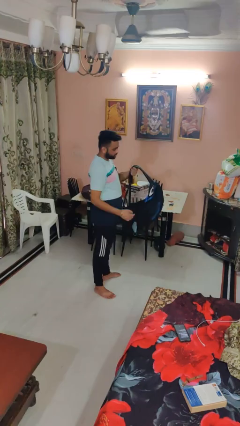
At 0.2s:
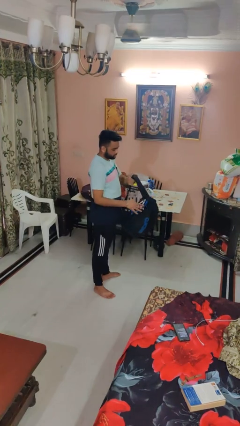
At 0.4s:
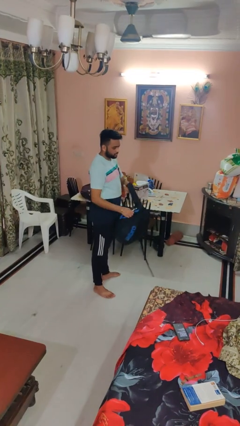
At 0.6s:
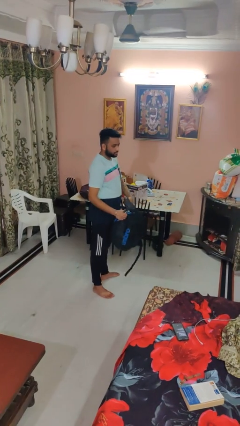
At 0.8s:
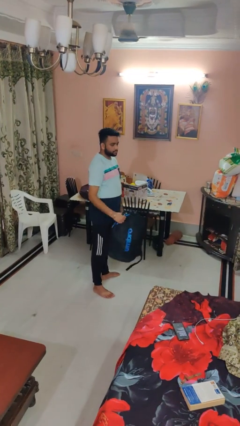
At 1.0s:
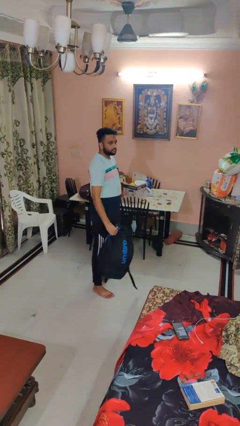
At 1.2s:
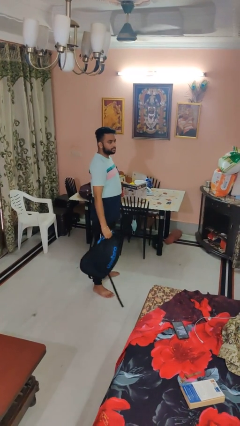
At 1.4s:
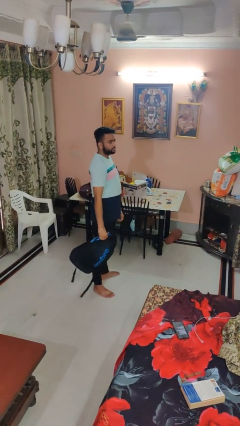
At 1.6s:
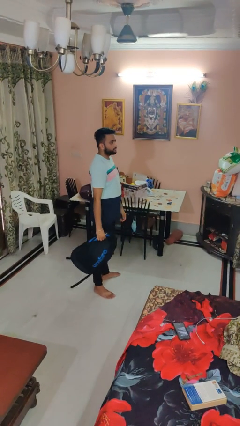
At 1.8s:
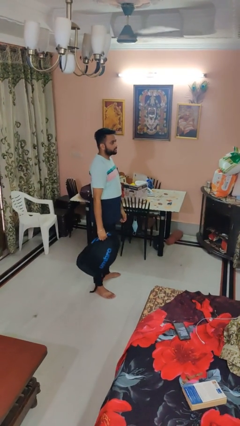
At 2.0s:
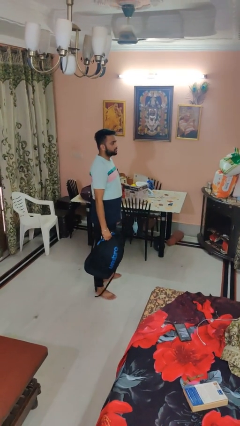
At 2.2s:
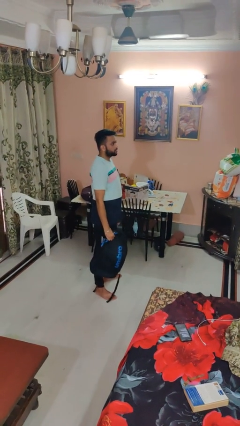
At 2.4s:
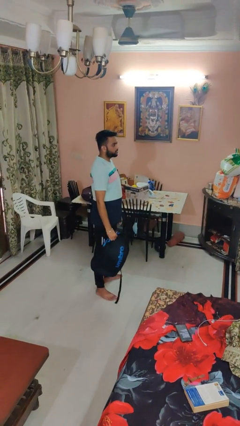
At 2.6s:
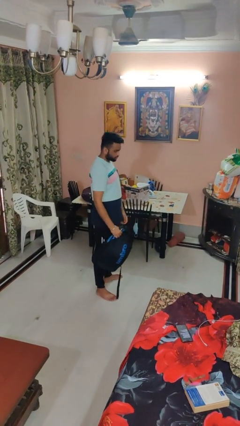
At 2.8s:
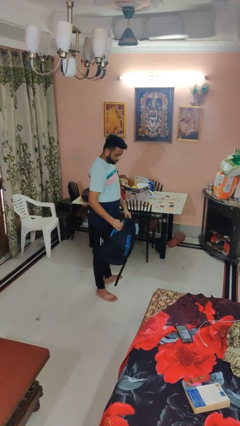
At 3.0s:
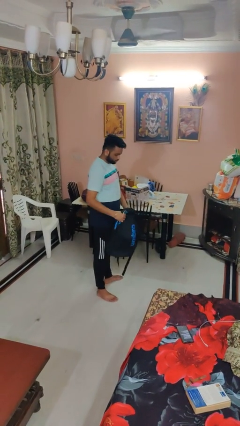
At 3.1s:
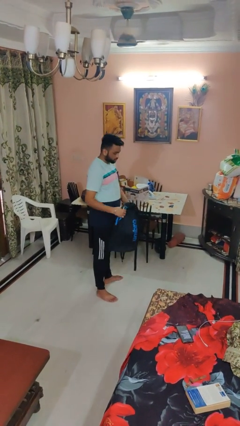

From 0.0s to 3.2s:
person takes off backpack

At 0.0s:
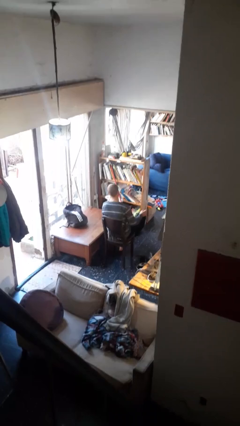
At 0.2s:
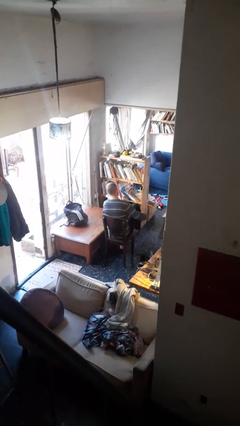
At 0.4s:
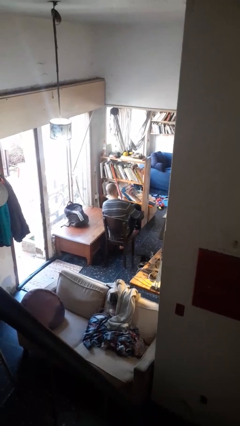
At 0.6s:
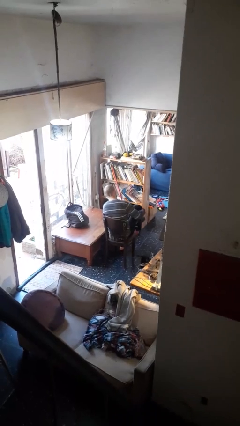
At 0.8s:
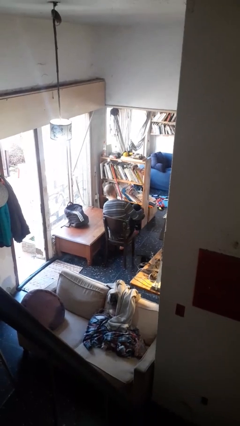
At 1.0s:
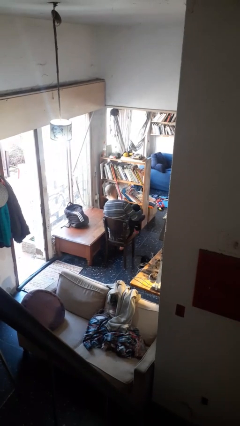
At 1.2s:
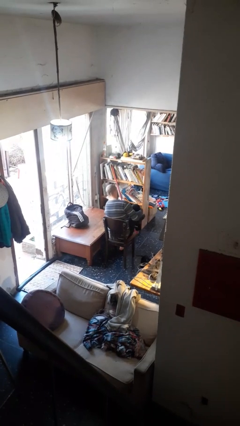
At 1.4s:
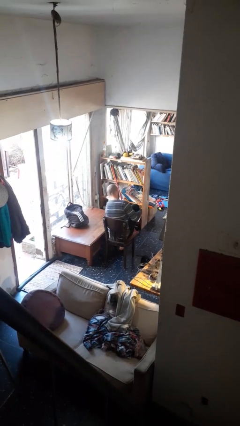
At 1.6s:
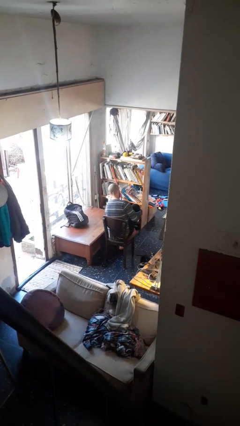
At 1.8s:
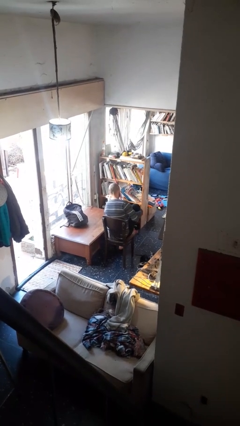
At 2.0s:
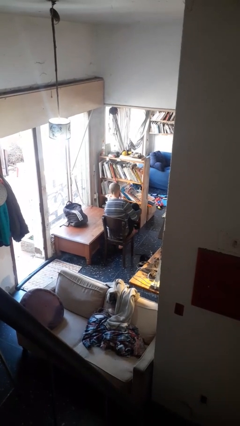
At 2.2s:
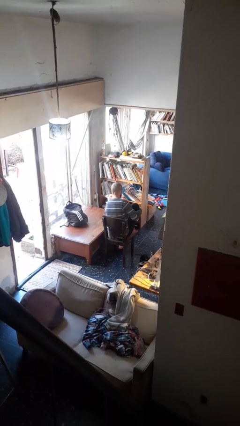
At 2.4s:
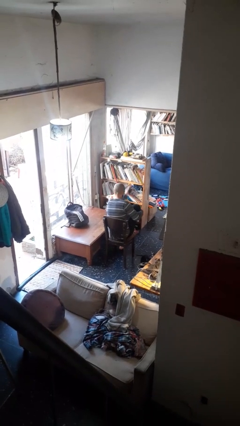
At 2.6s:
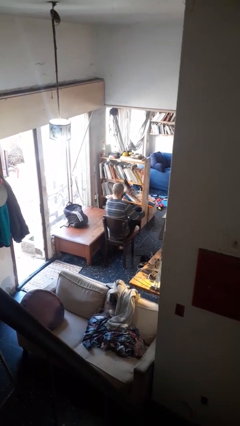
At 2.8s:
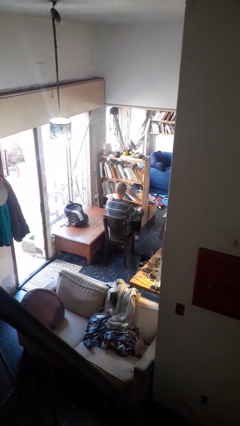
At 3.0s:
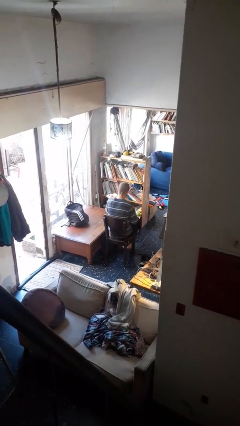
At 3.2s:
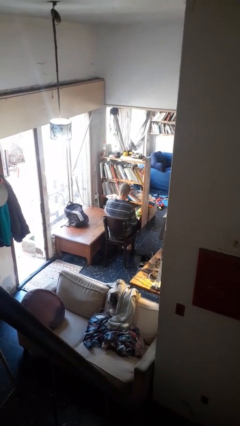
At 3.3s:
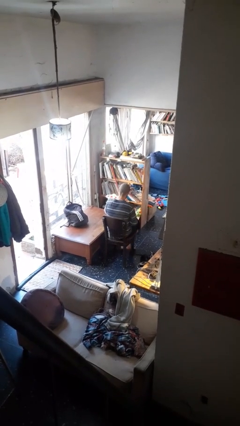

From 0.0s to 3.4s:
person takes off socks

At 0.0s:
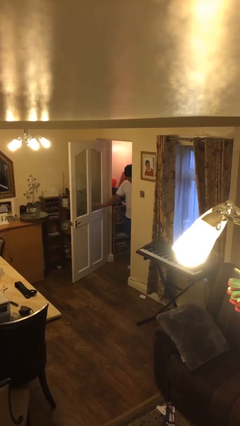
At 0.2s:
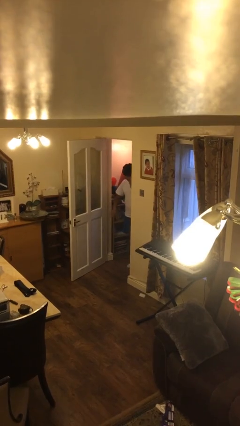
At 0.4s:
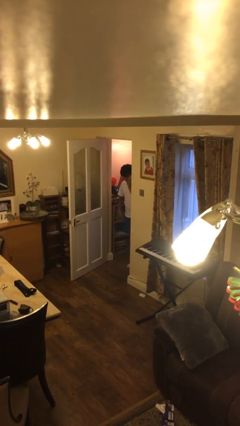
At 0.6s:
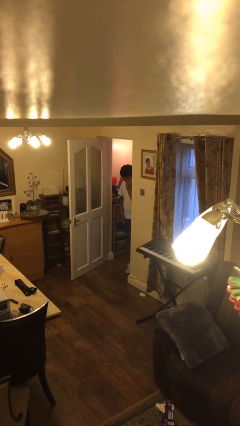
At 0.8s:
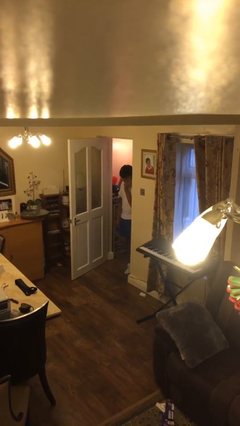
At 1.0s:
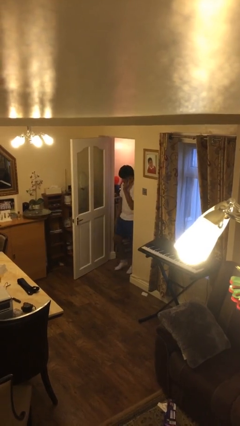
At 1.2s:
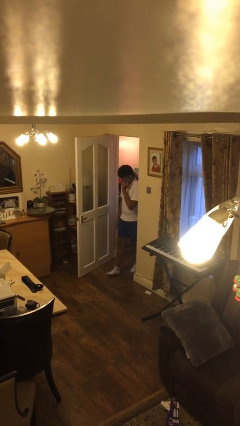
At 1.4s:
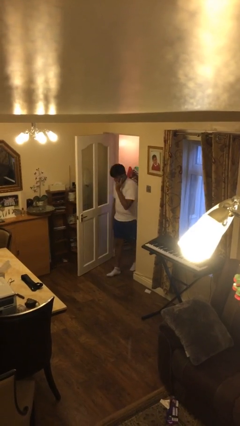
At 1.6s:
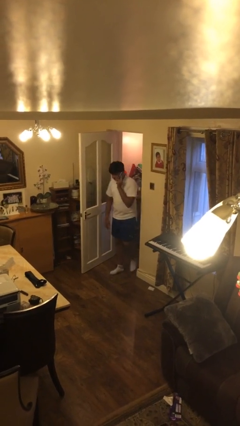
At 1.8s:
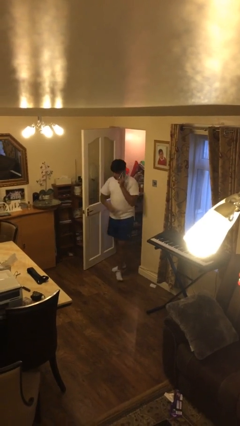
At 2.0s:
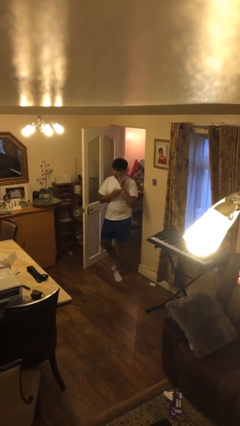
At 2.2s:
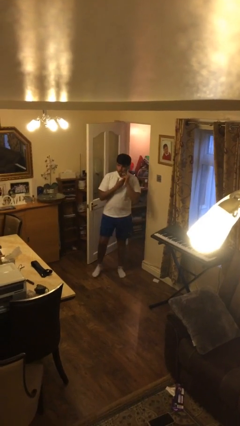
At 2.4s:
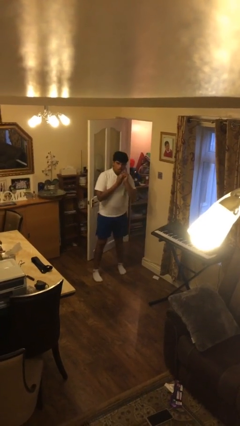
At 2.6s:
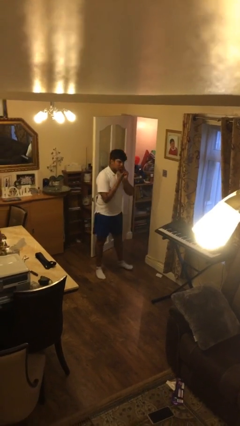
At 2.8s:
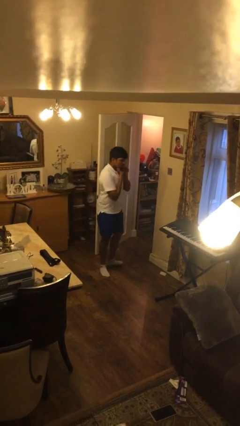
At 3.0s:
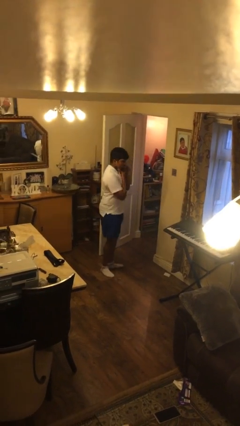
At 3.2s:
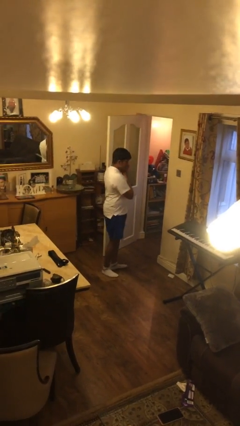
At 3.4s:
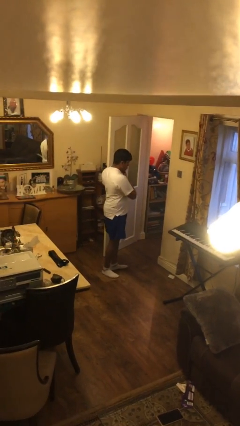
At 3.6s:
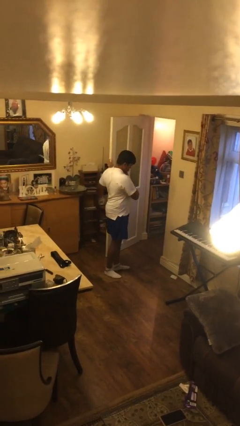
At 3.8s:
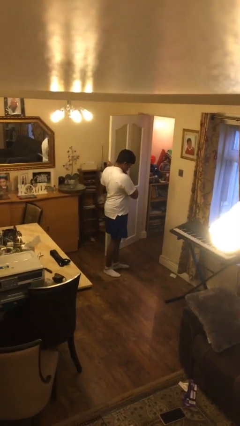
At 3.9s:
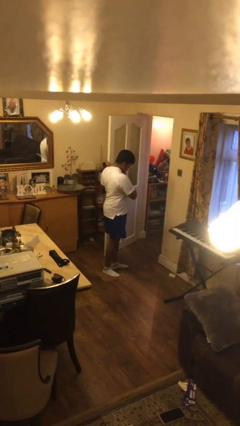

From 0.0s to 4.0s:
person enters scene through structure

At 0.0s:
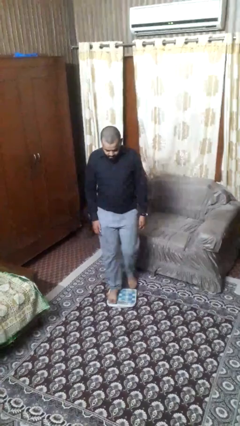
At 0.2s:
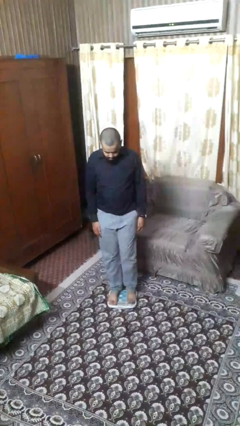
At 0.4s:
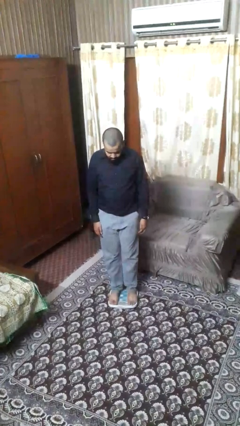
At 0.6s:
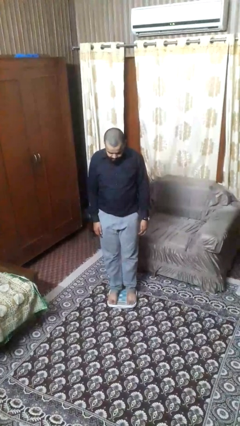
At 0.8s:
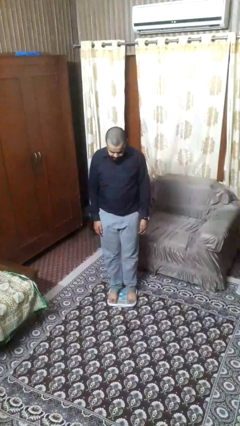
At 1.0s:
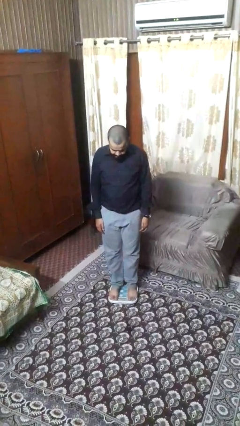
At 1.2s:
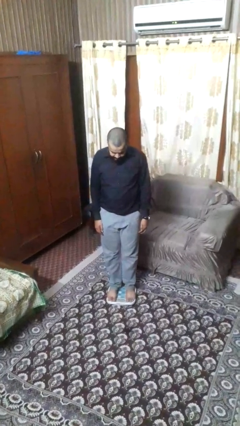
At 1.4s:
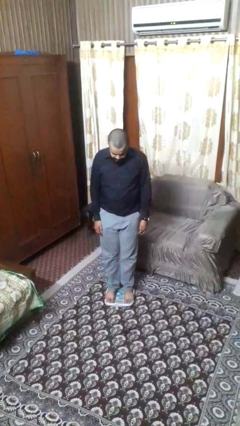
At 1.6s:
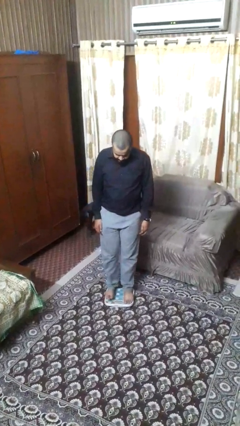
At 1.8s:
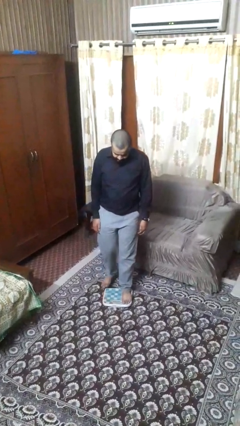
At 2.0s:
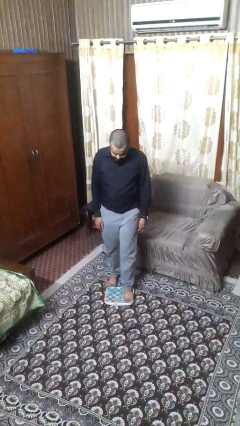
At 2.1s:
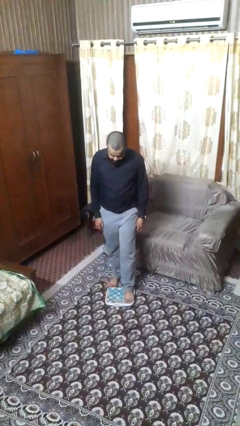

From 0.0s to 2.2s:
person uses bodyweight scale

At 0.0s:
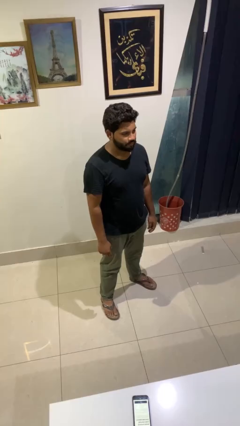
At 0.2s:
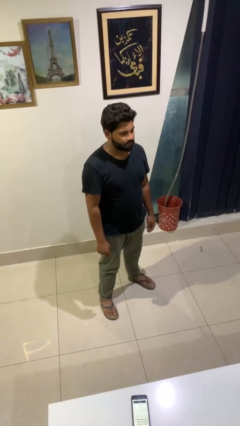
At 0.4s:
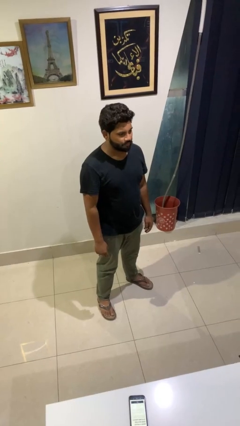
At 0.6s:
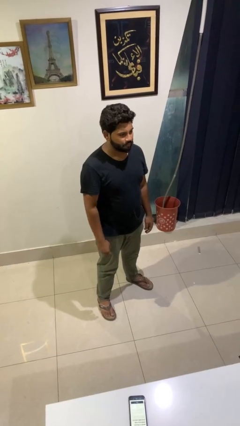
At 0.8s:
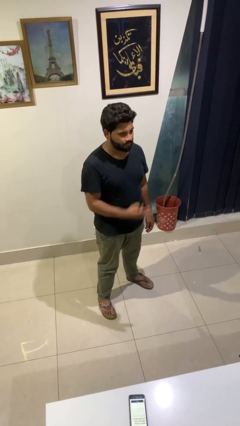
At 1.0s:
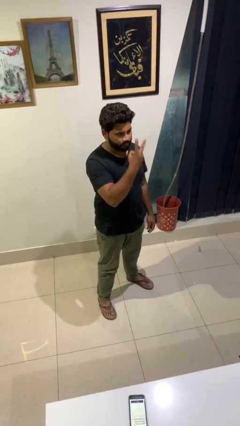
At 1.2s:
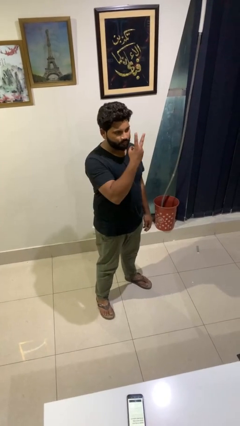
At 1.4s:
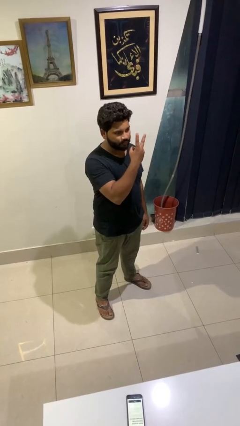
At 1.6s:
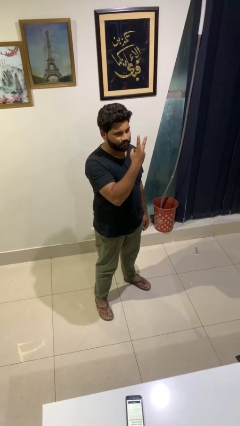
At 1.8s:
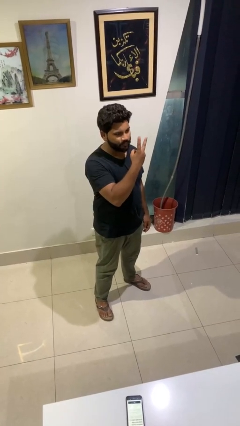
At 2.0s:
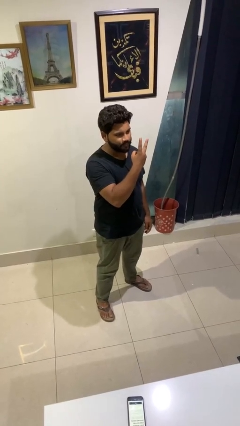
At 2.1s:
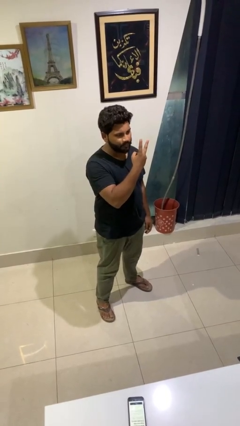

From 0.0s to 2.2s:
person gestures peace

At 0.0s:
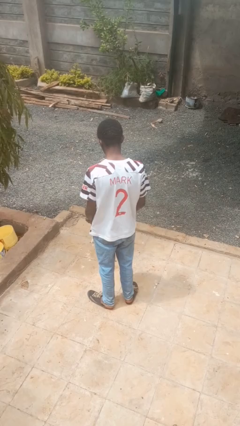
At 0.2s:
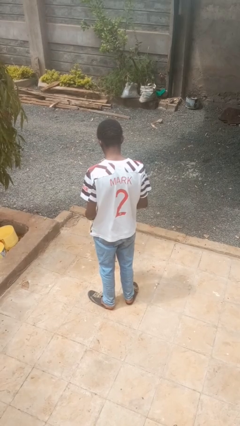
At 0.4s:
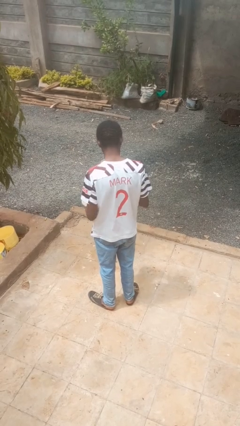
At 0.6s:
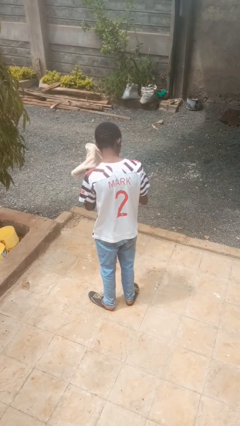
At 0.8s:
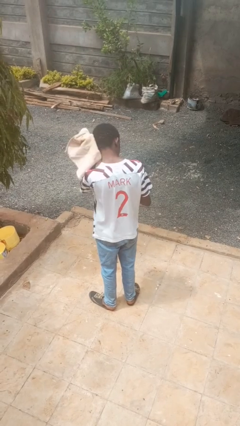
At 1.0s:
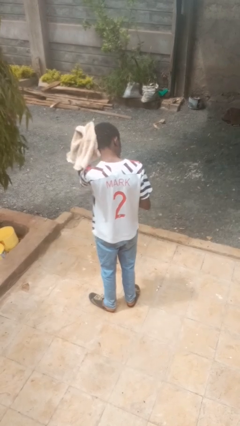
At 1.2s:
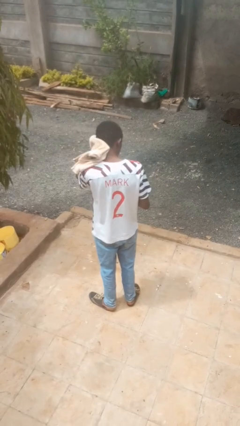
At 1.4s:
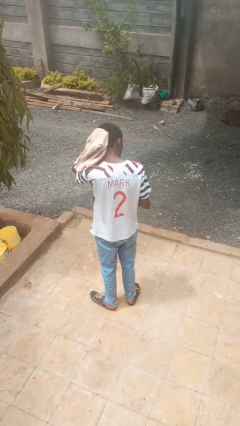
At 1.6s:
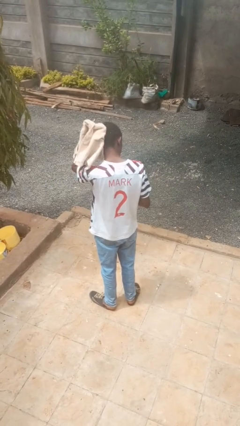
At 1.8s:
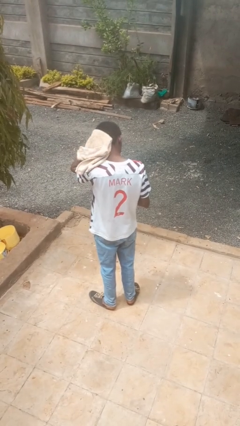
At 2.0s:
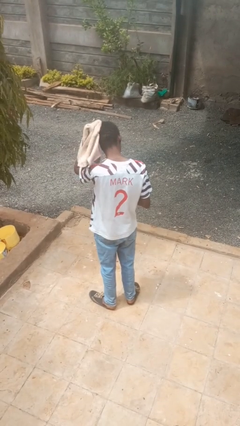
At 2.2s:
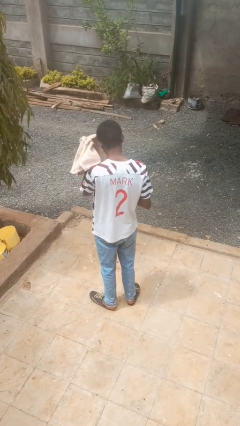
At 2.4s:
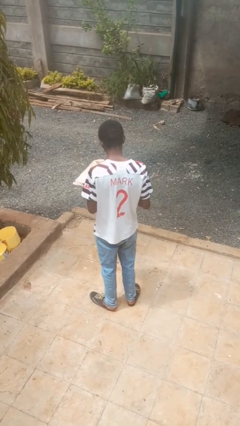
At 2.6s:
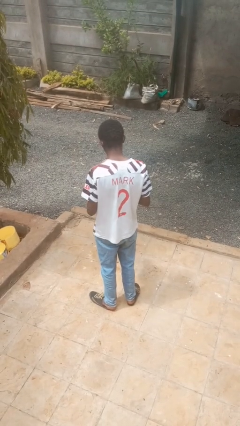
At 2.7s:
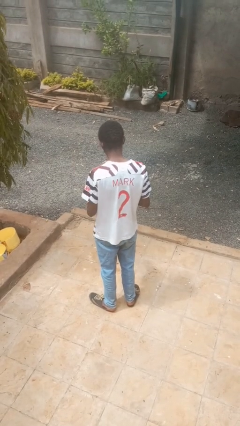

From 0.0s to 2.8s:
person dries hair with towel
